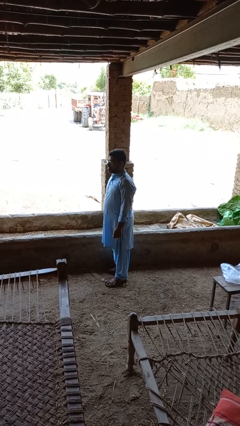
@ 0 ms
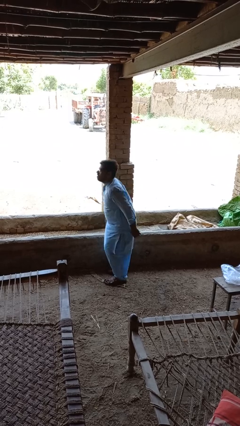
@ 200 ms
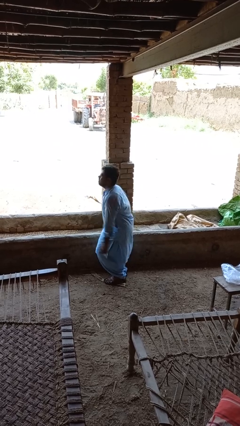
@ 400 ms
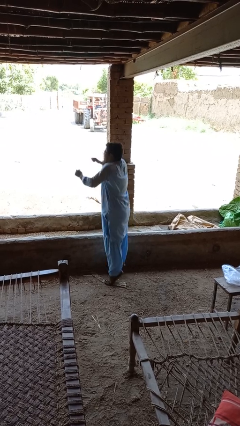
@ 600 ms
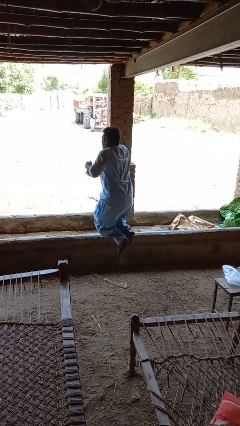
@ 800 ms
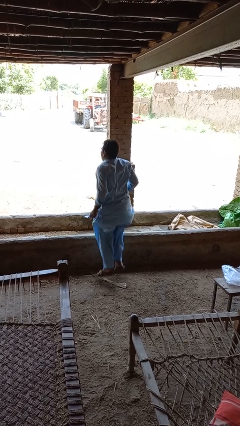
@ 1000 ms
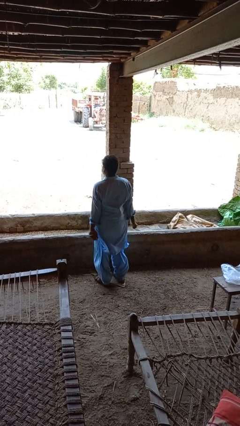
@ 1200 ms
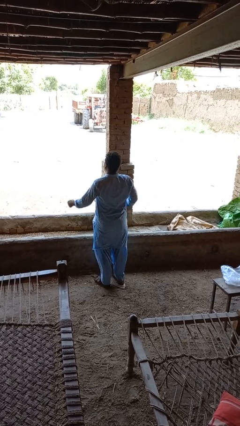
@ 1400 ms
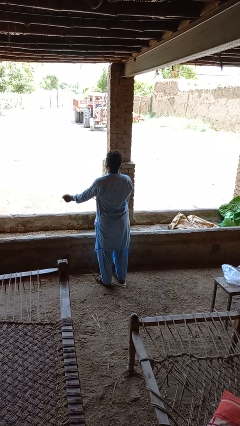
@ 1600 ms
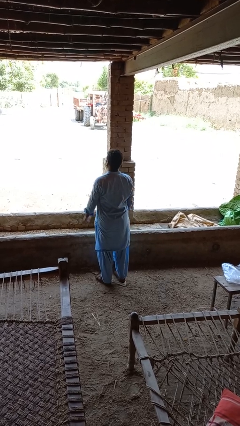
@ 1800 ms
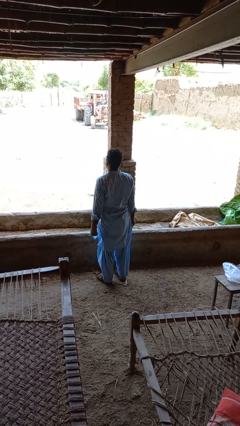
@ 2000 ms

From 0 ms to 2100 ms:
person jumps

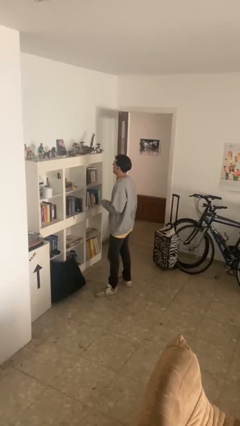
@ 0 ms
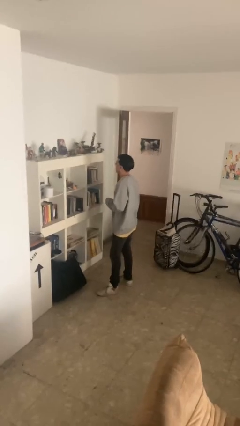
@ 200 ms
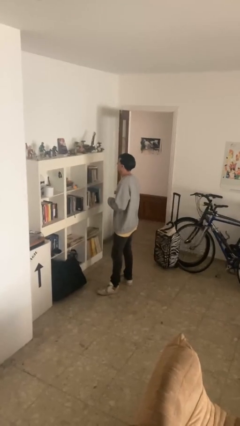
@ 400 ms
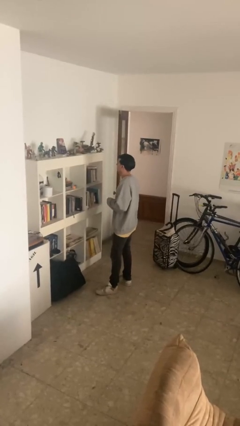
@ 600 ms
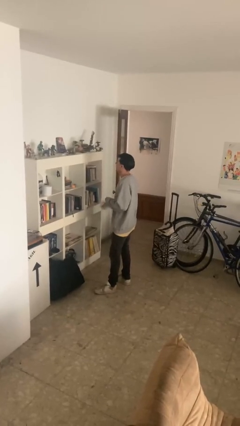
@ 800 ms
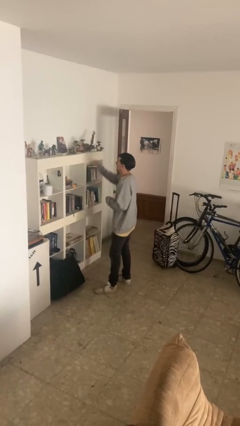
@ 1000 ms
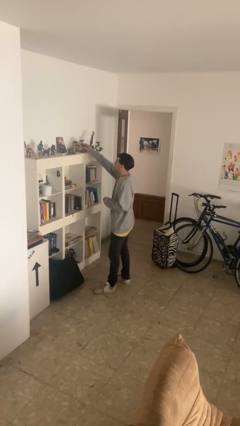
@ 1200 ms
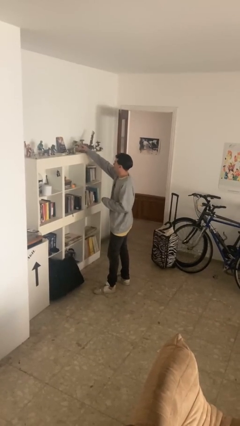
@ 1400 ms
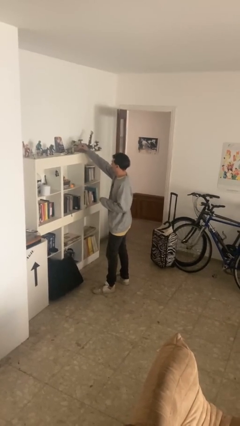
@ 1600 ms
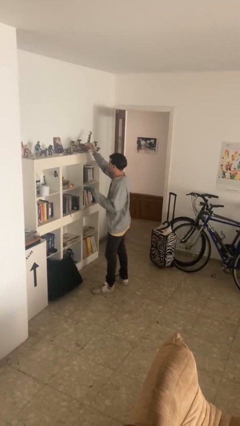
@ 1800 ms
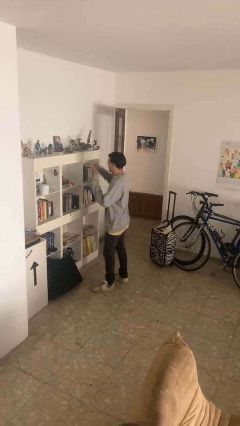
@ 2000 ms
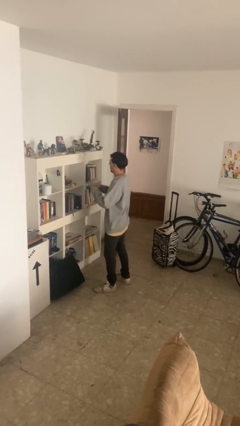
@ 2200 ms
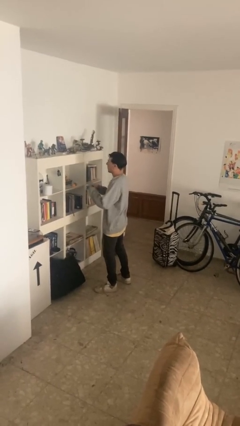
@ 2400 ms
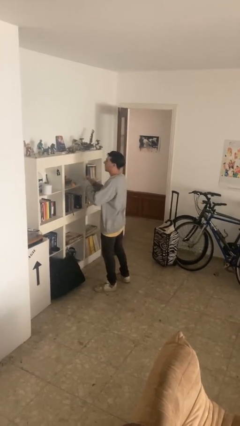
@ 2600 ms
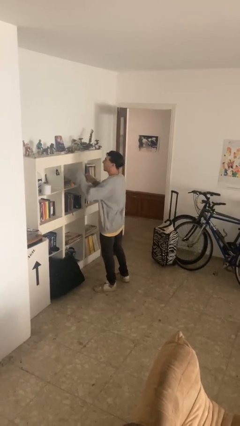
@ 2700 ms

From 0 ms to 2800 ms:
person picks up object from shelf

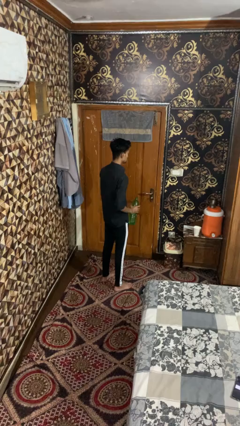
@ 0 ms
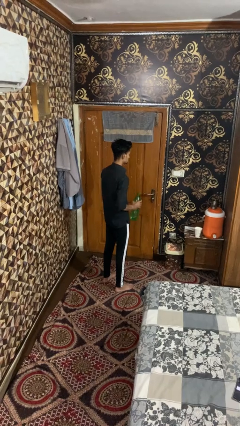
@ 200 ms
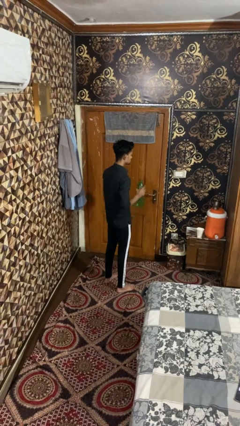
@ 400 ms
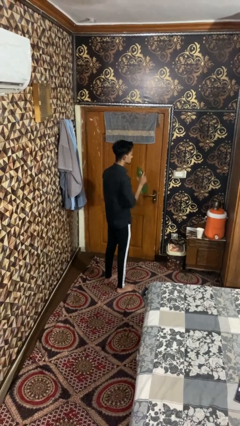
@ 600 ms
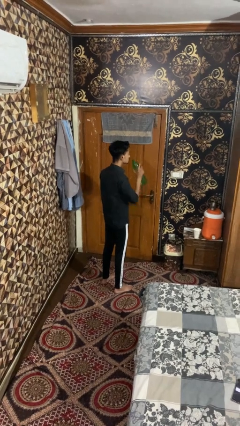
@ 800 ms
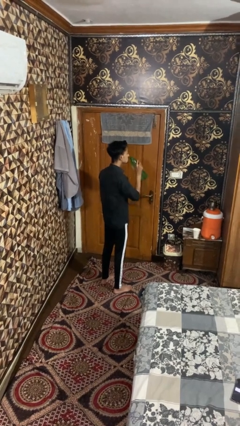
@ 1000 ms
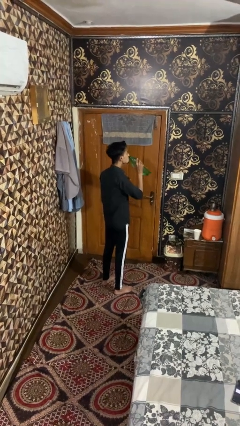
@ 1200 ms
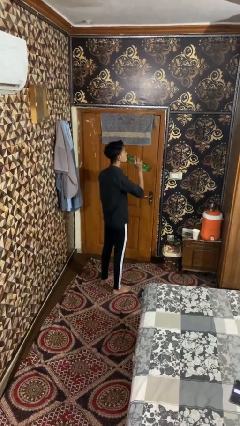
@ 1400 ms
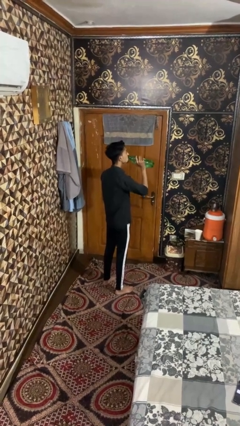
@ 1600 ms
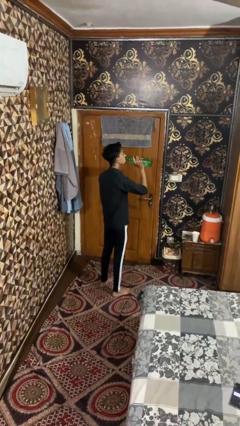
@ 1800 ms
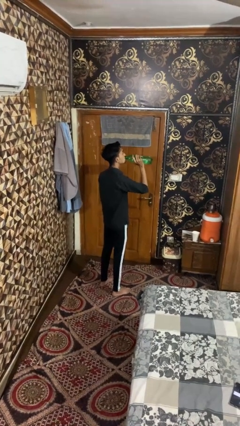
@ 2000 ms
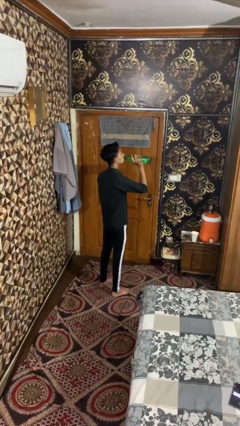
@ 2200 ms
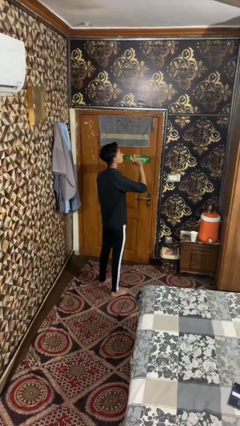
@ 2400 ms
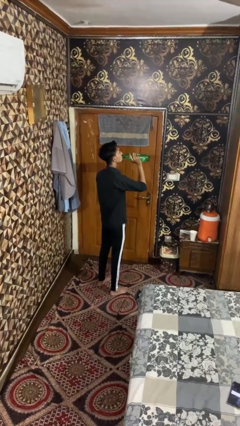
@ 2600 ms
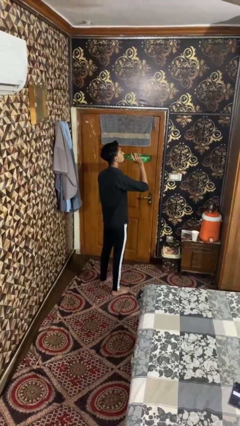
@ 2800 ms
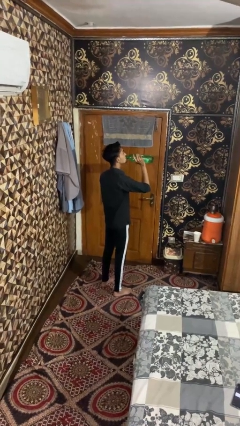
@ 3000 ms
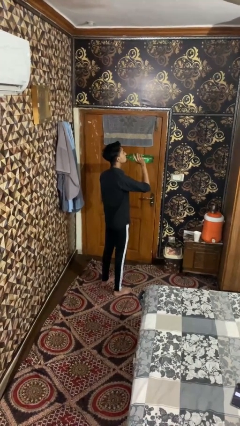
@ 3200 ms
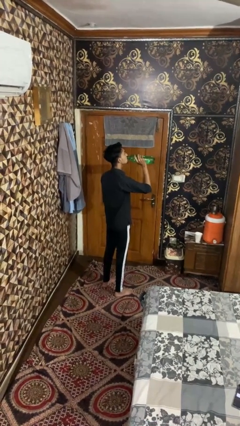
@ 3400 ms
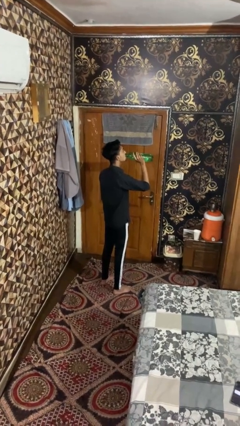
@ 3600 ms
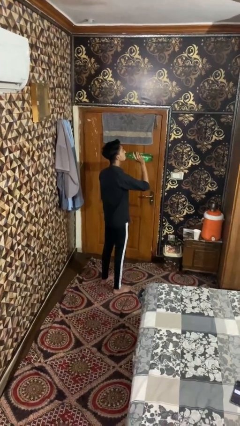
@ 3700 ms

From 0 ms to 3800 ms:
person drinks from bottle

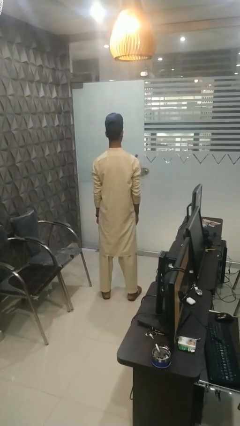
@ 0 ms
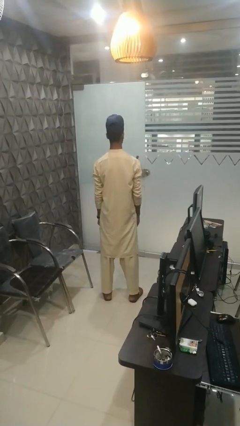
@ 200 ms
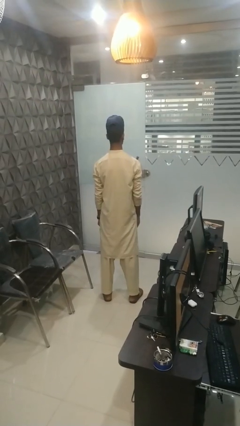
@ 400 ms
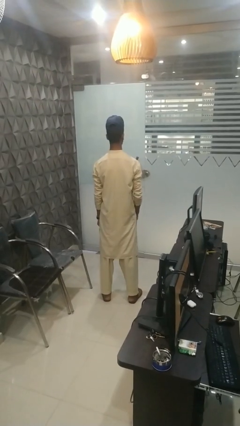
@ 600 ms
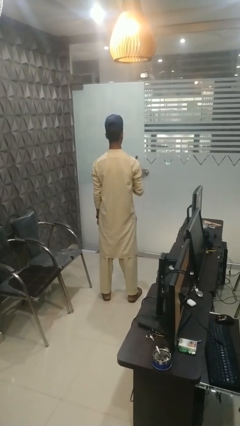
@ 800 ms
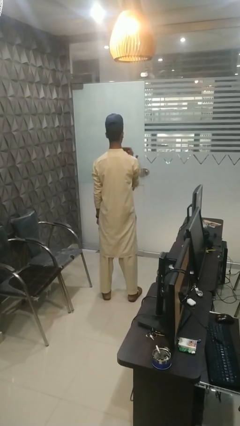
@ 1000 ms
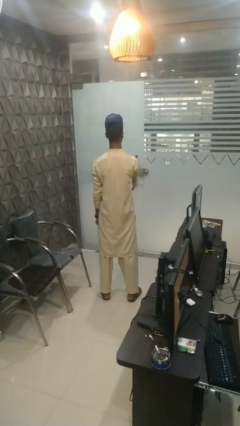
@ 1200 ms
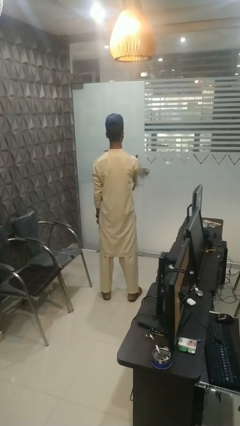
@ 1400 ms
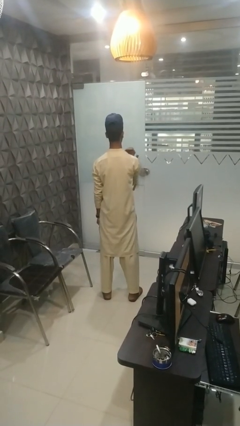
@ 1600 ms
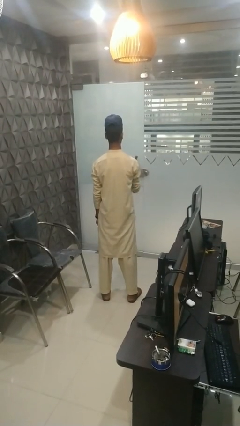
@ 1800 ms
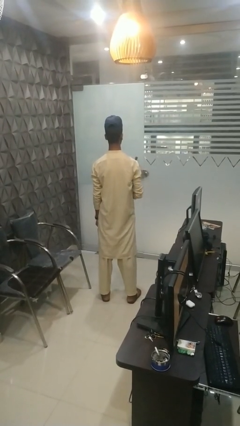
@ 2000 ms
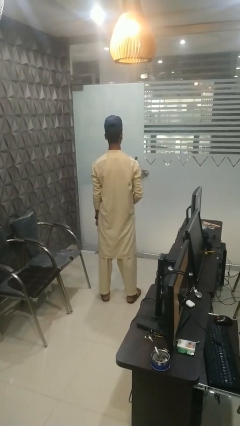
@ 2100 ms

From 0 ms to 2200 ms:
person gestures cut

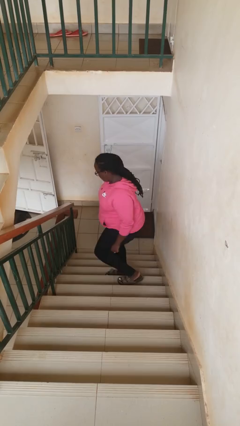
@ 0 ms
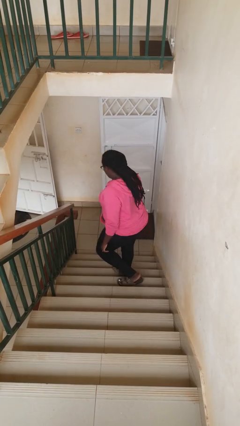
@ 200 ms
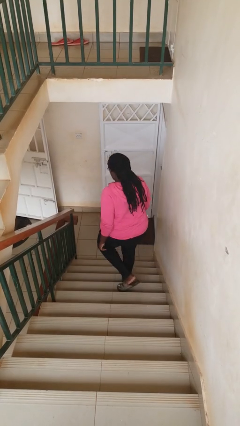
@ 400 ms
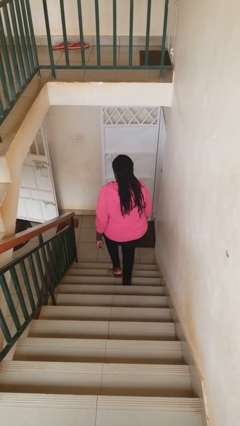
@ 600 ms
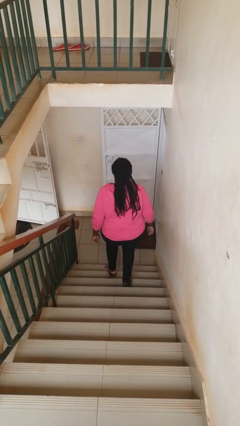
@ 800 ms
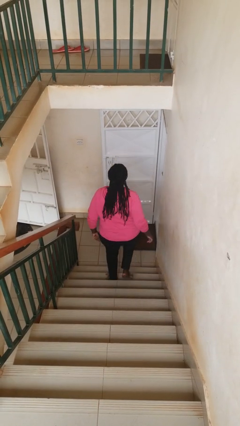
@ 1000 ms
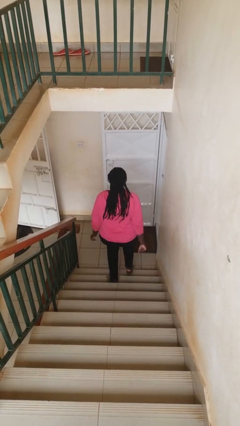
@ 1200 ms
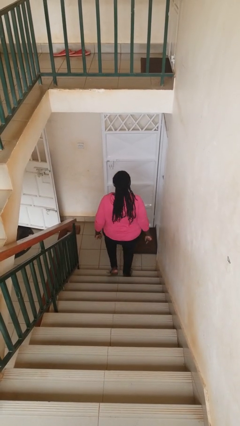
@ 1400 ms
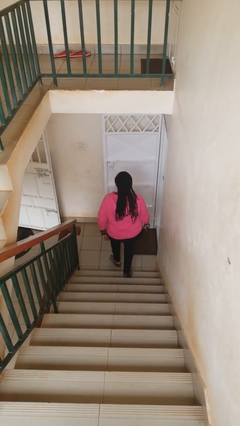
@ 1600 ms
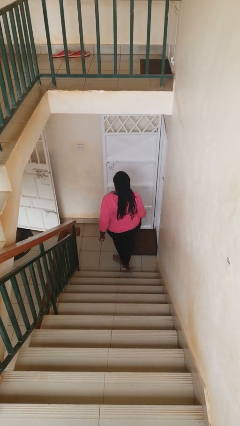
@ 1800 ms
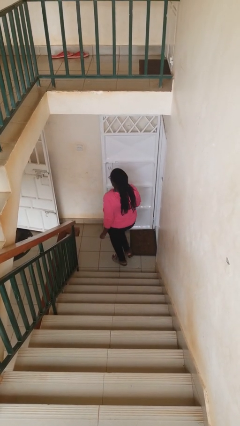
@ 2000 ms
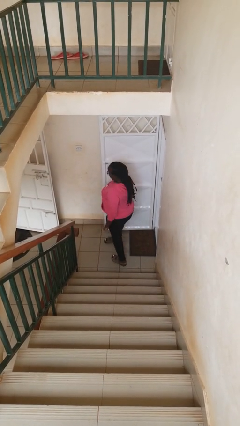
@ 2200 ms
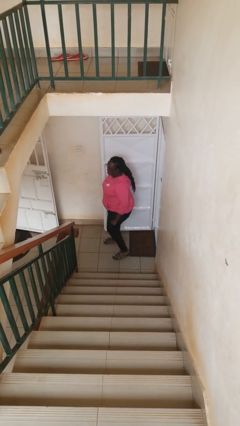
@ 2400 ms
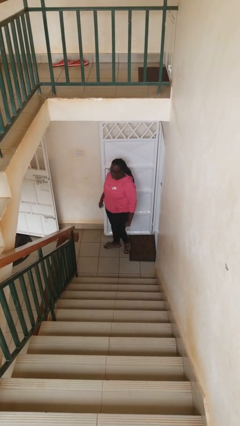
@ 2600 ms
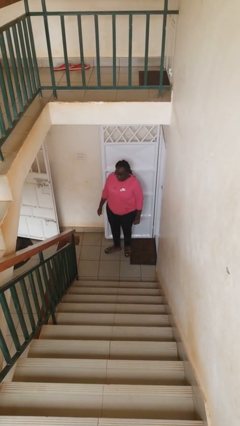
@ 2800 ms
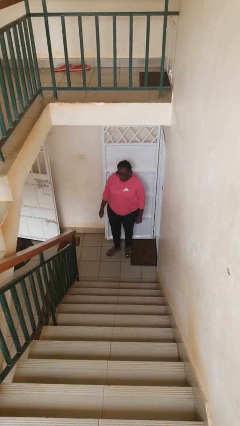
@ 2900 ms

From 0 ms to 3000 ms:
person climbs down stairs

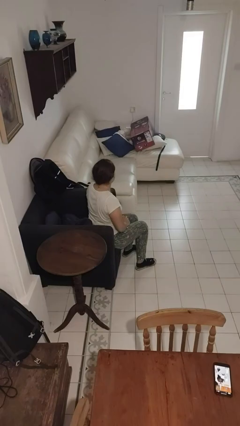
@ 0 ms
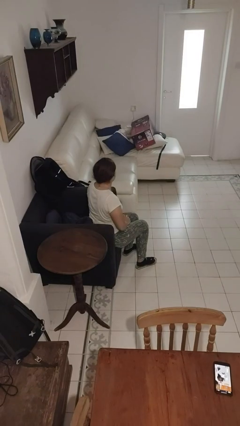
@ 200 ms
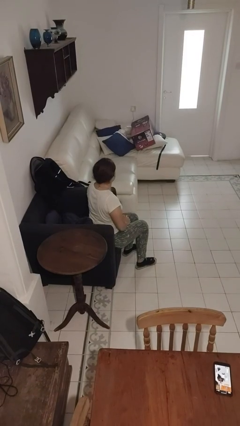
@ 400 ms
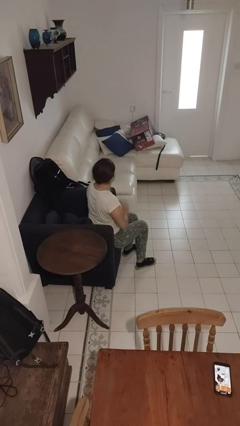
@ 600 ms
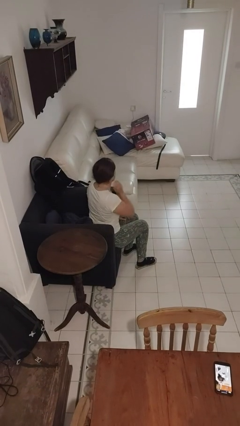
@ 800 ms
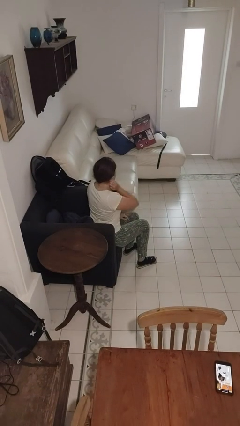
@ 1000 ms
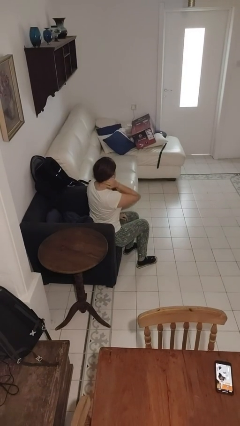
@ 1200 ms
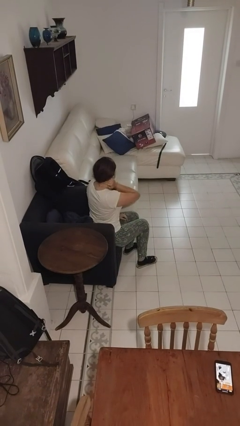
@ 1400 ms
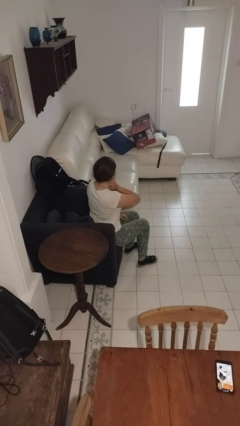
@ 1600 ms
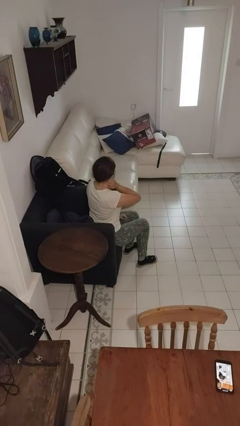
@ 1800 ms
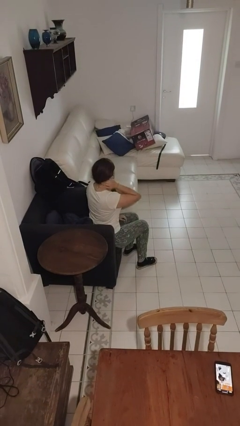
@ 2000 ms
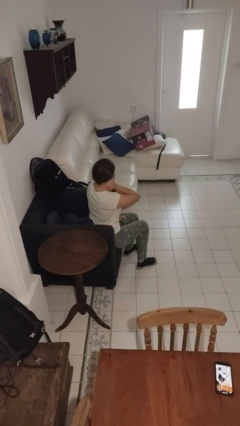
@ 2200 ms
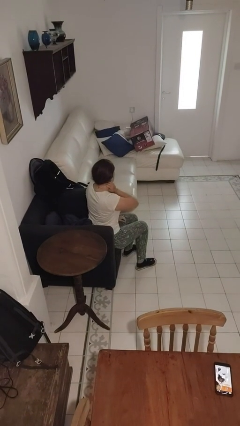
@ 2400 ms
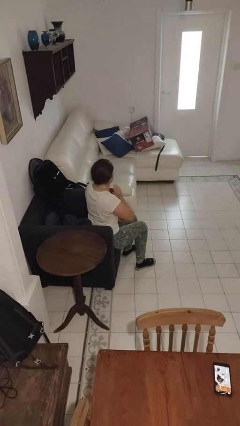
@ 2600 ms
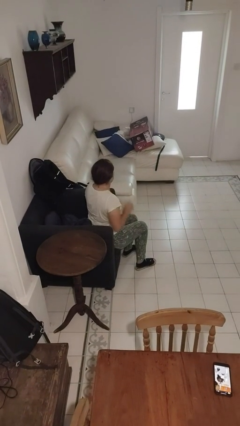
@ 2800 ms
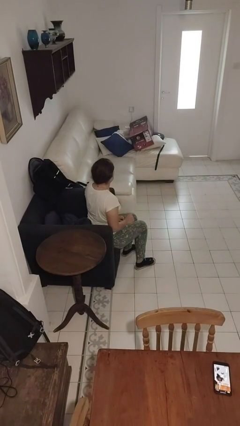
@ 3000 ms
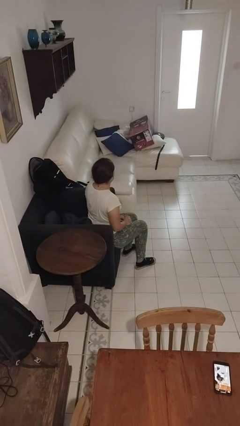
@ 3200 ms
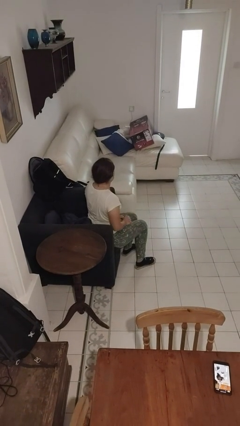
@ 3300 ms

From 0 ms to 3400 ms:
person rubs neck

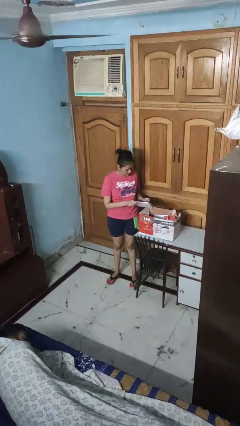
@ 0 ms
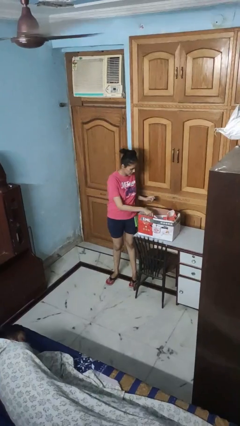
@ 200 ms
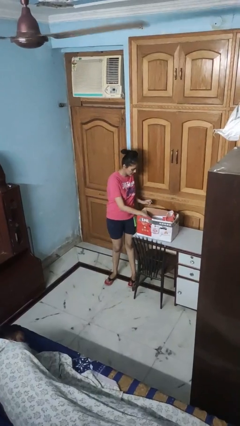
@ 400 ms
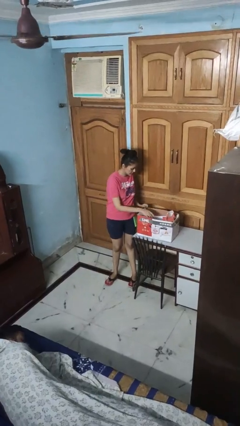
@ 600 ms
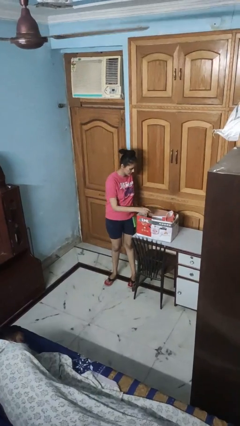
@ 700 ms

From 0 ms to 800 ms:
person puts object into box
